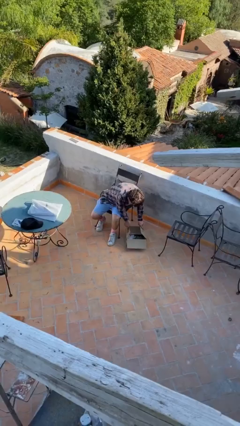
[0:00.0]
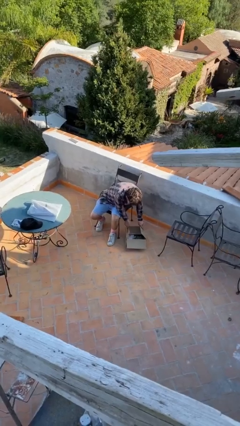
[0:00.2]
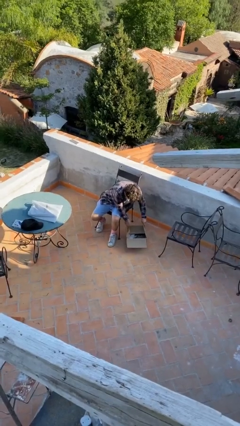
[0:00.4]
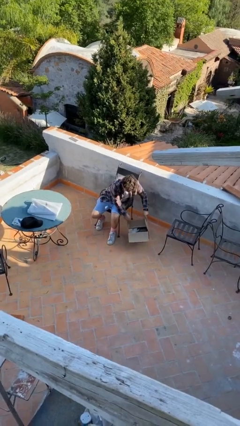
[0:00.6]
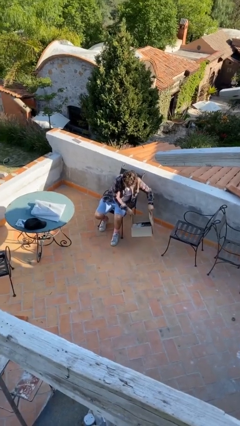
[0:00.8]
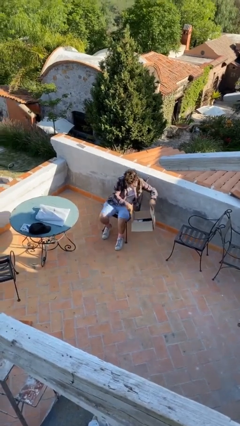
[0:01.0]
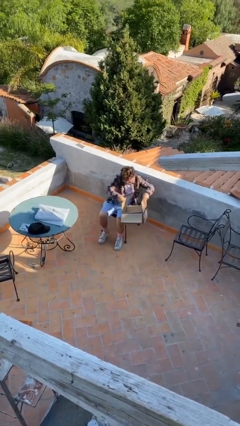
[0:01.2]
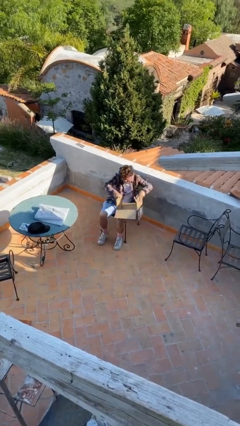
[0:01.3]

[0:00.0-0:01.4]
person picks up object from floor

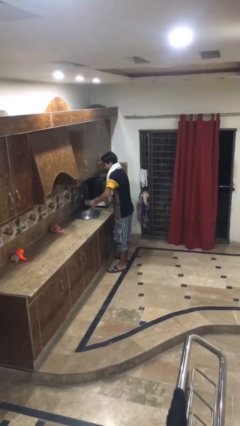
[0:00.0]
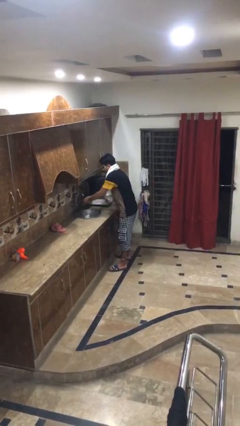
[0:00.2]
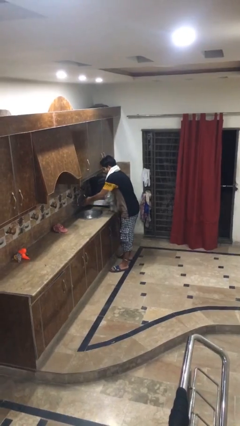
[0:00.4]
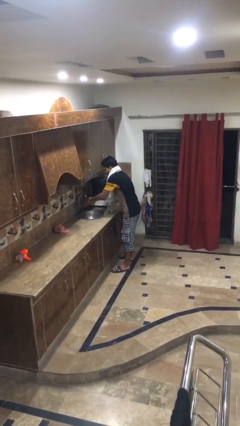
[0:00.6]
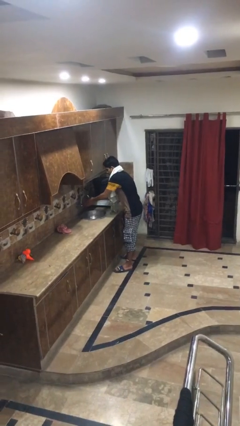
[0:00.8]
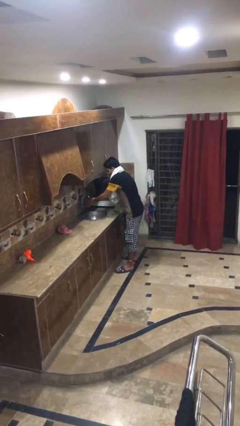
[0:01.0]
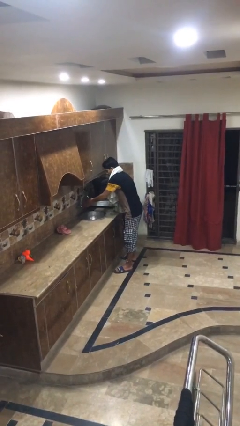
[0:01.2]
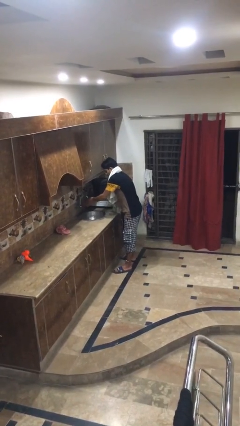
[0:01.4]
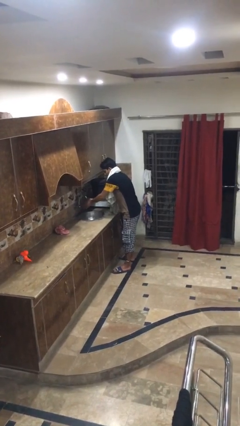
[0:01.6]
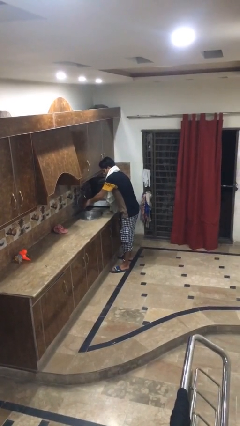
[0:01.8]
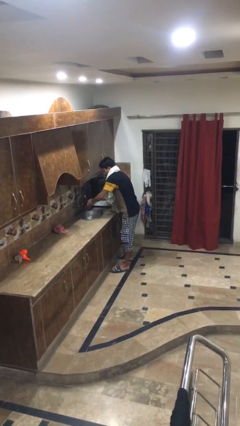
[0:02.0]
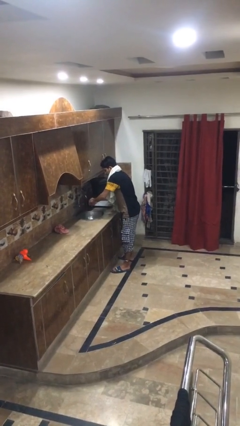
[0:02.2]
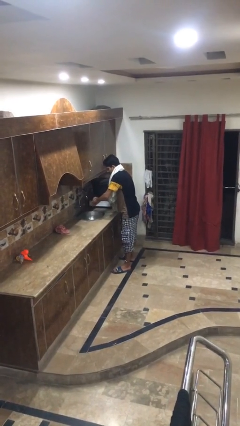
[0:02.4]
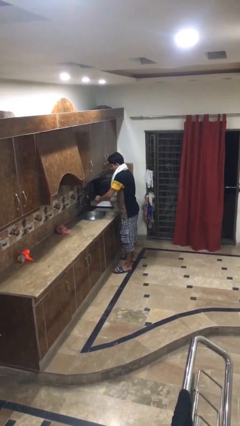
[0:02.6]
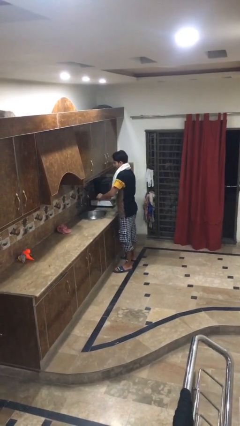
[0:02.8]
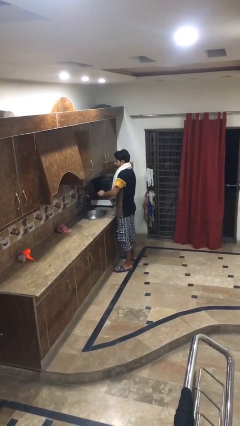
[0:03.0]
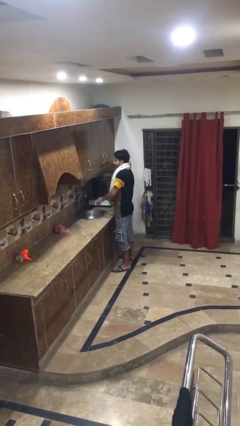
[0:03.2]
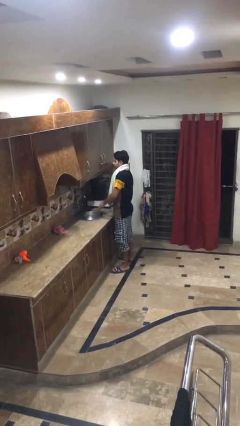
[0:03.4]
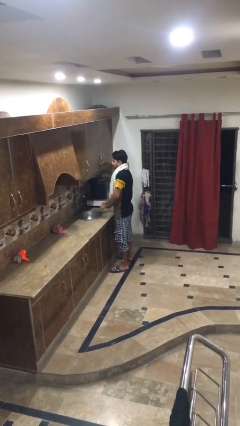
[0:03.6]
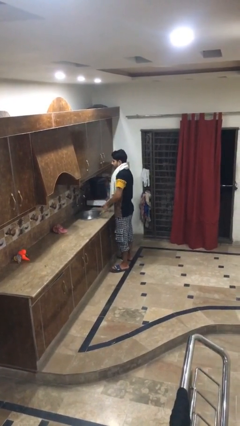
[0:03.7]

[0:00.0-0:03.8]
person washes hands

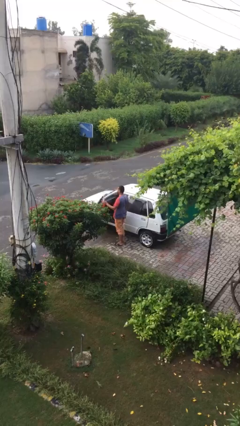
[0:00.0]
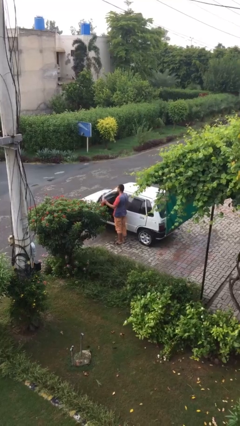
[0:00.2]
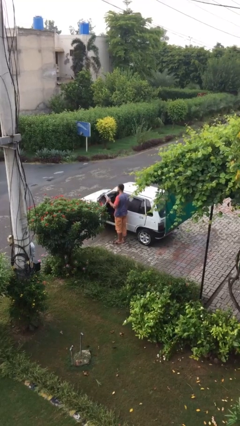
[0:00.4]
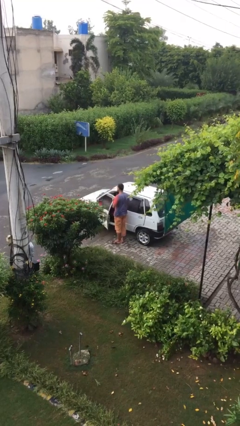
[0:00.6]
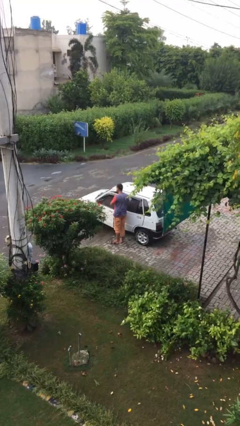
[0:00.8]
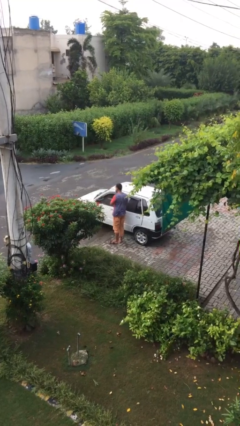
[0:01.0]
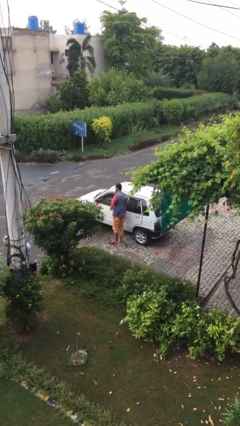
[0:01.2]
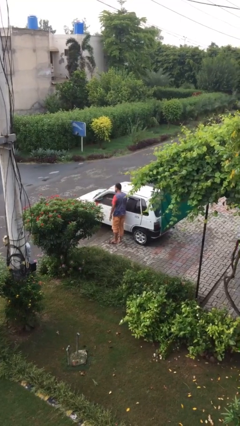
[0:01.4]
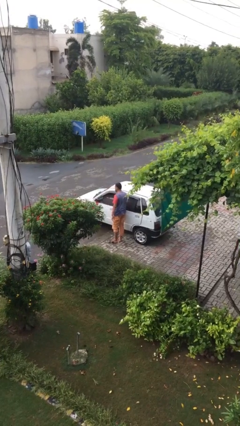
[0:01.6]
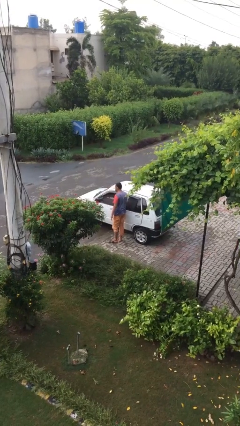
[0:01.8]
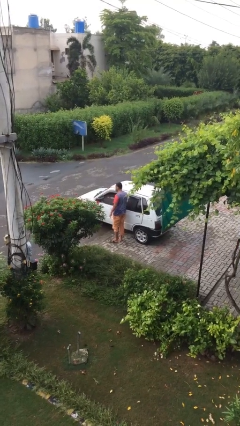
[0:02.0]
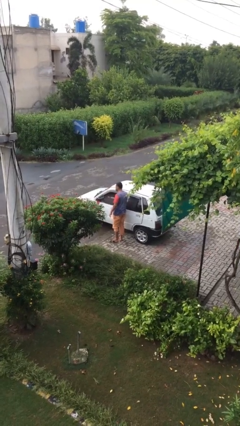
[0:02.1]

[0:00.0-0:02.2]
person closes car door

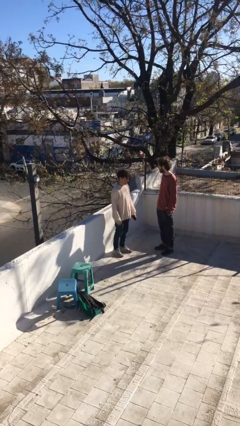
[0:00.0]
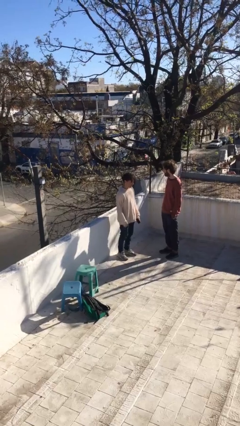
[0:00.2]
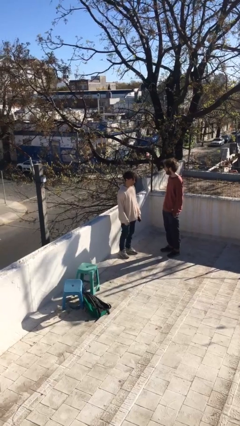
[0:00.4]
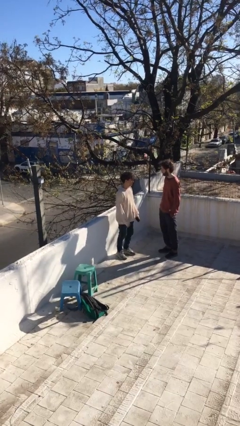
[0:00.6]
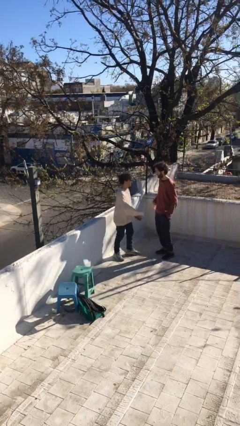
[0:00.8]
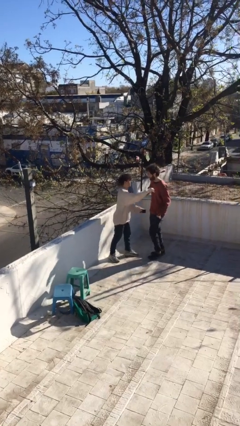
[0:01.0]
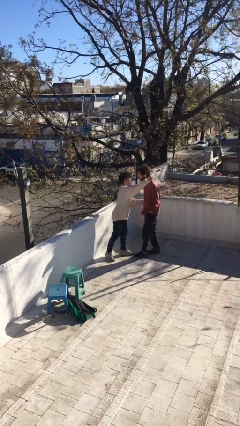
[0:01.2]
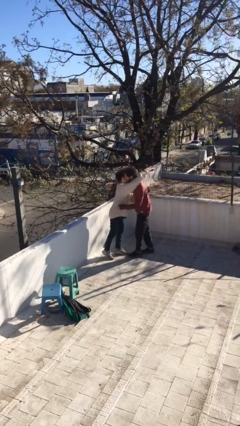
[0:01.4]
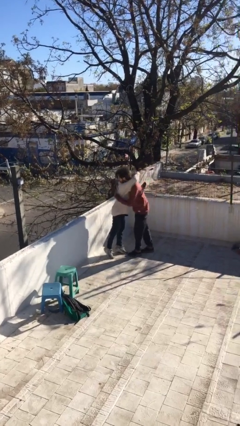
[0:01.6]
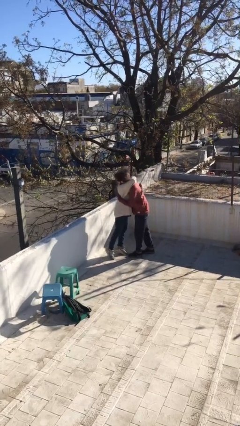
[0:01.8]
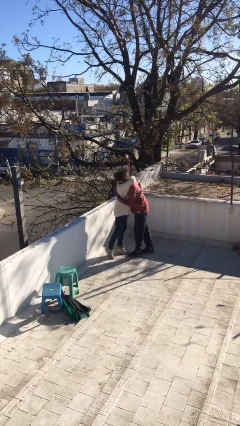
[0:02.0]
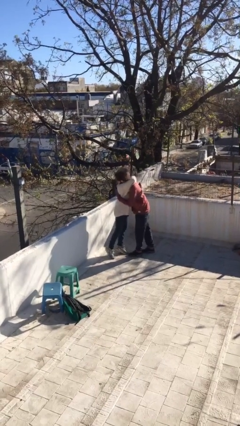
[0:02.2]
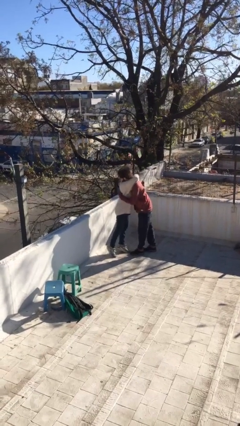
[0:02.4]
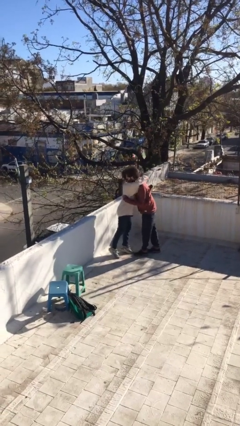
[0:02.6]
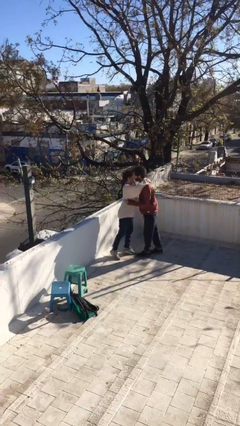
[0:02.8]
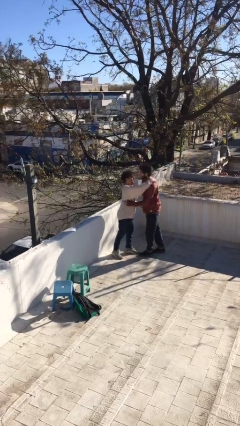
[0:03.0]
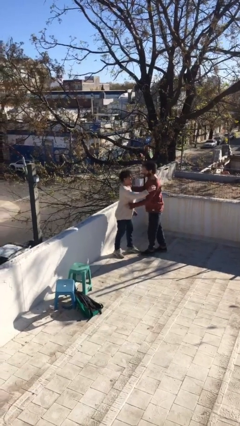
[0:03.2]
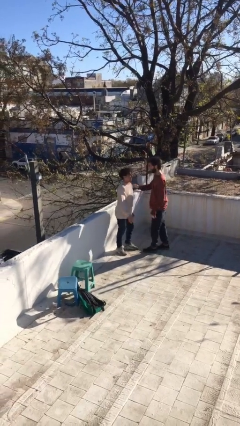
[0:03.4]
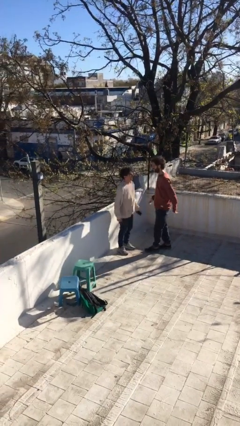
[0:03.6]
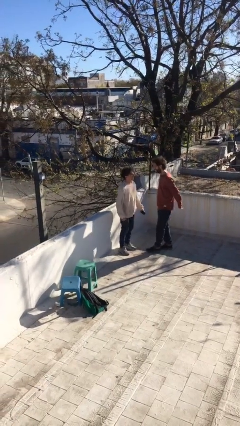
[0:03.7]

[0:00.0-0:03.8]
person embraces person

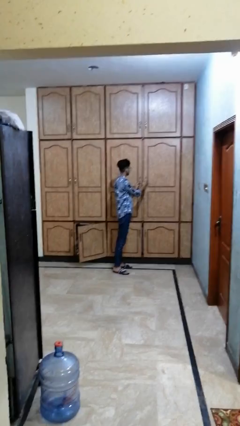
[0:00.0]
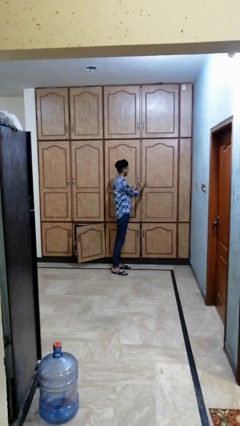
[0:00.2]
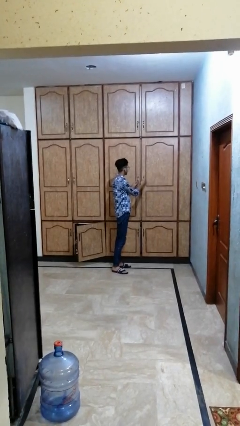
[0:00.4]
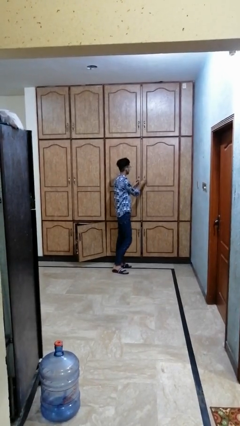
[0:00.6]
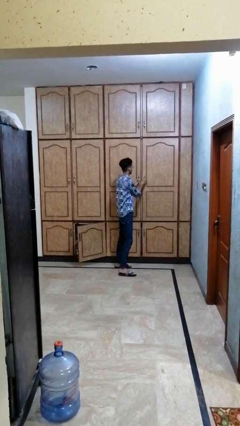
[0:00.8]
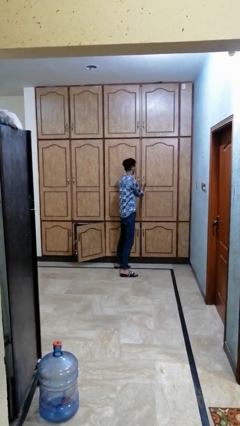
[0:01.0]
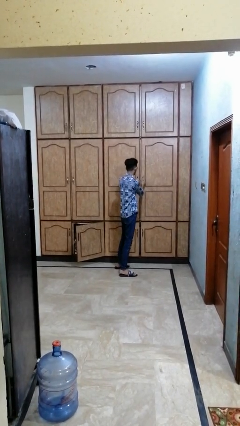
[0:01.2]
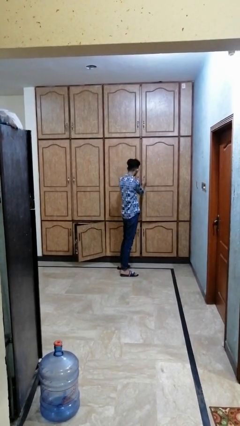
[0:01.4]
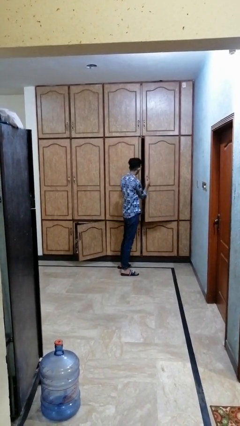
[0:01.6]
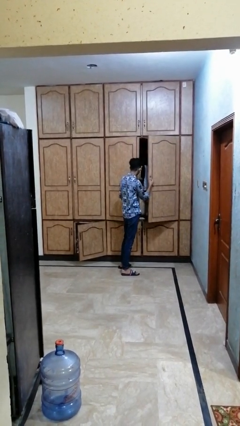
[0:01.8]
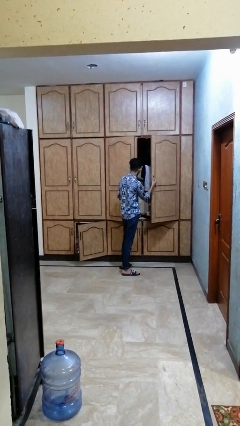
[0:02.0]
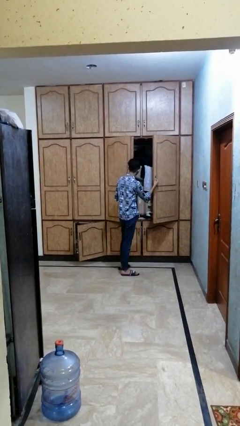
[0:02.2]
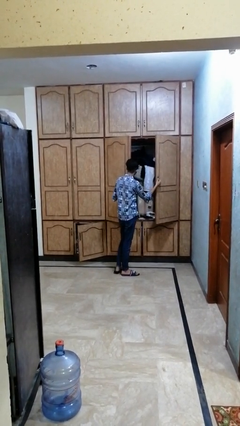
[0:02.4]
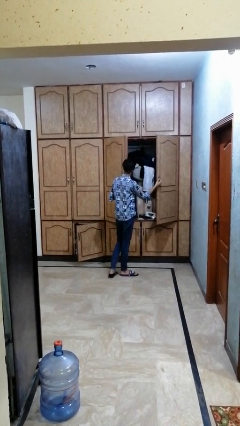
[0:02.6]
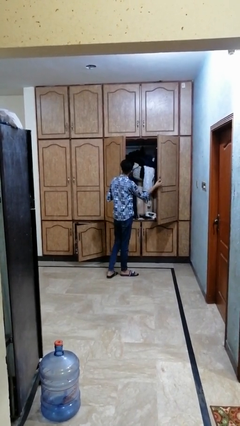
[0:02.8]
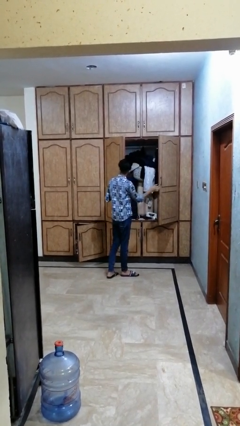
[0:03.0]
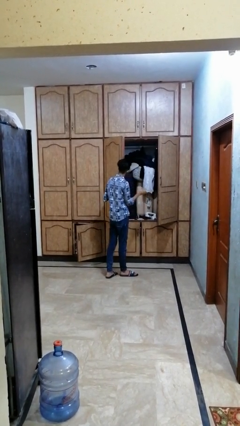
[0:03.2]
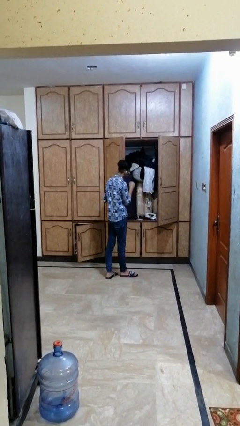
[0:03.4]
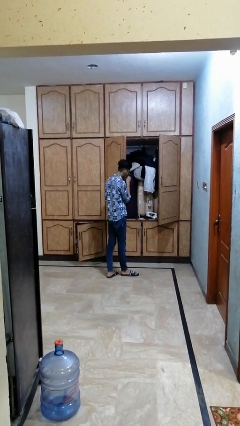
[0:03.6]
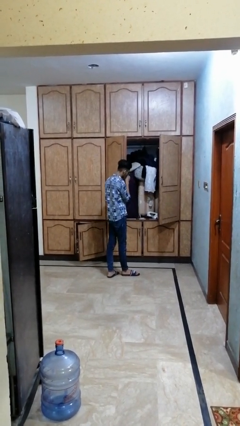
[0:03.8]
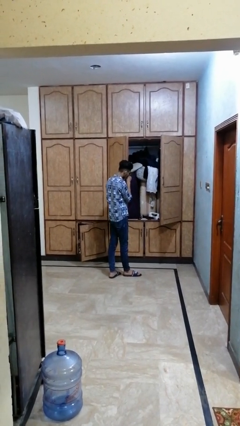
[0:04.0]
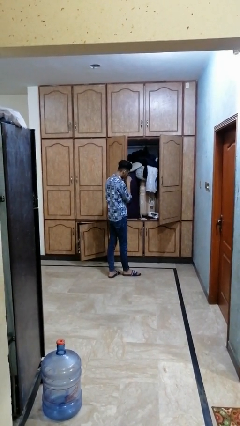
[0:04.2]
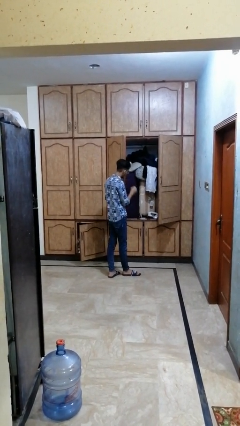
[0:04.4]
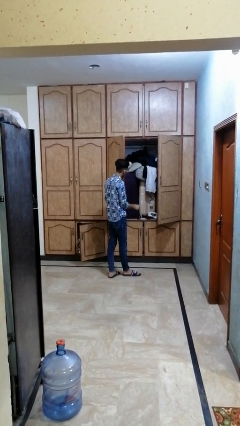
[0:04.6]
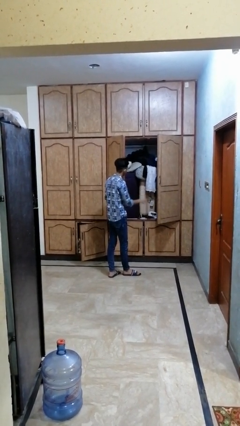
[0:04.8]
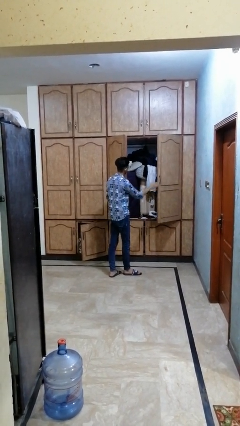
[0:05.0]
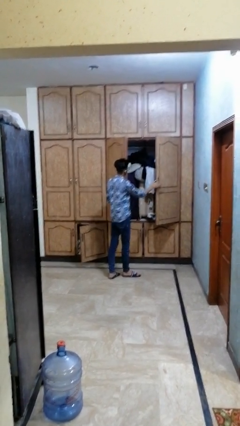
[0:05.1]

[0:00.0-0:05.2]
person opens dresser drawer

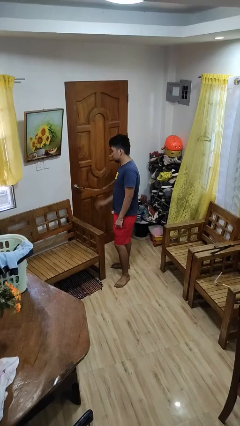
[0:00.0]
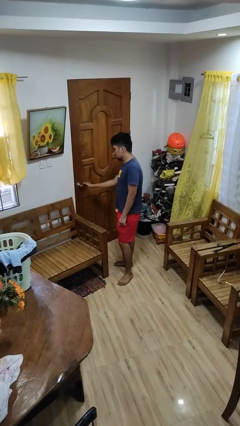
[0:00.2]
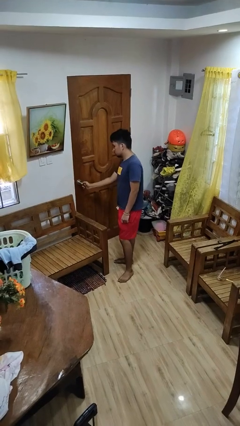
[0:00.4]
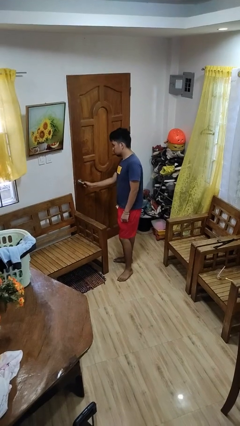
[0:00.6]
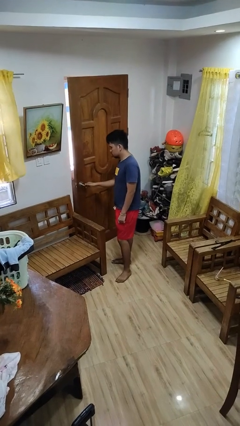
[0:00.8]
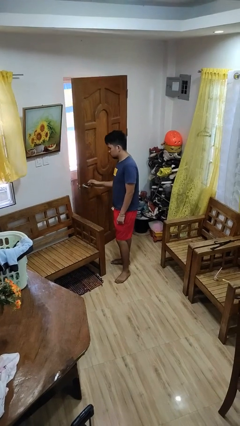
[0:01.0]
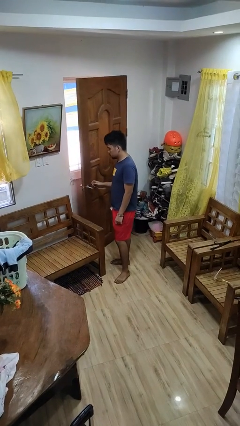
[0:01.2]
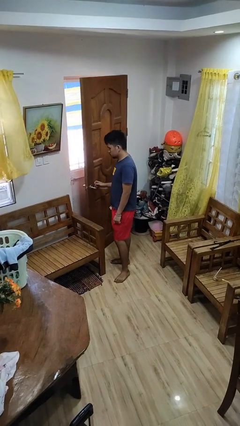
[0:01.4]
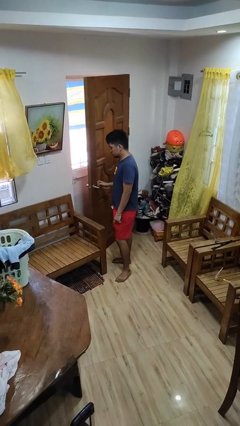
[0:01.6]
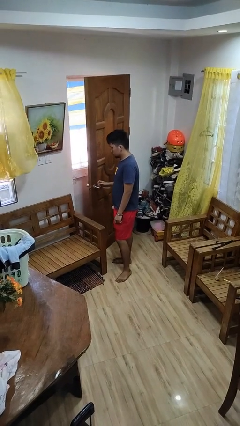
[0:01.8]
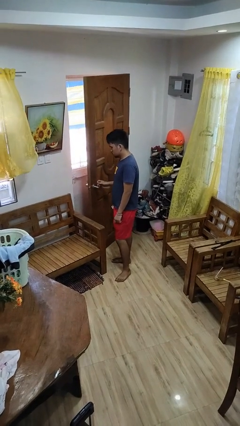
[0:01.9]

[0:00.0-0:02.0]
person opens facility door
